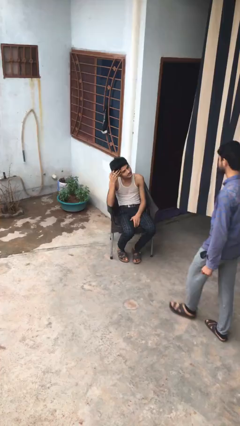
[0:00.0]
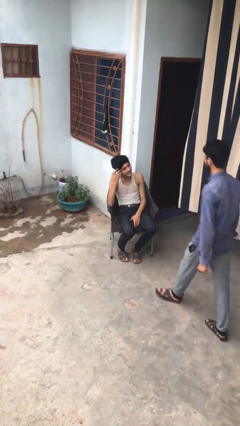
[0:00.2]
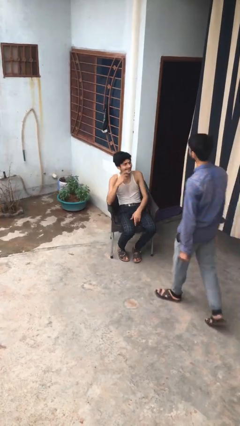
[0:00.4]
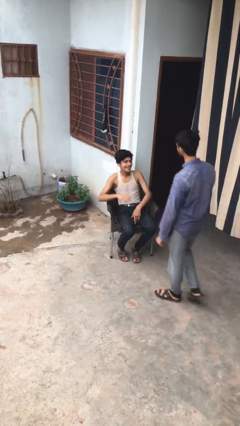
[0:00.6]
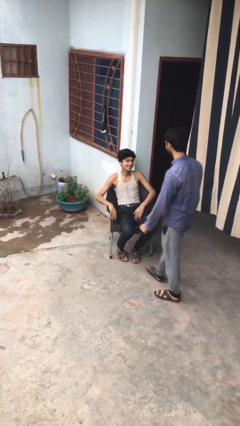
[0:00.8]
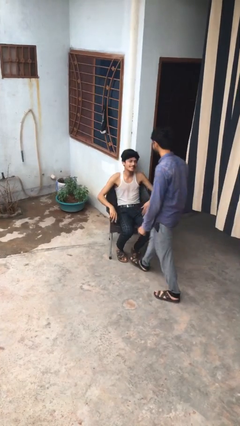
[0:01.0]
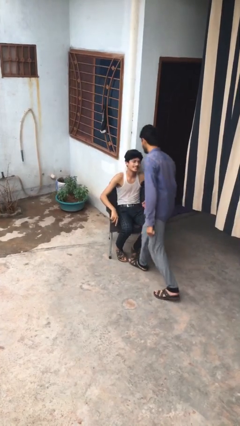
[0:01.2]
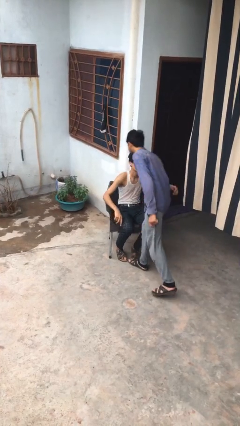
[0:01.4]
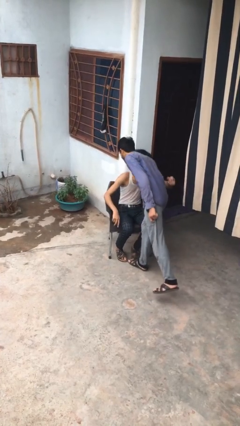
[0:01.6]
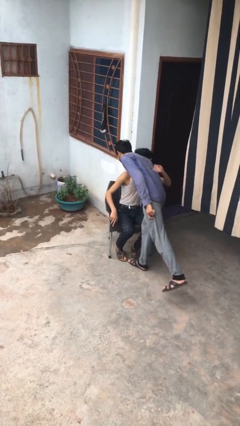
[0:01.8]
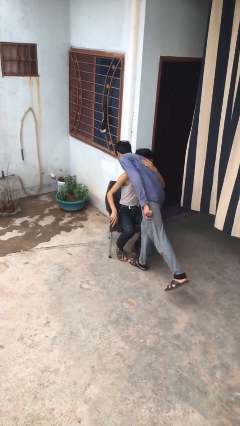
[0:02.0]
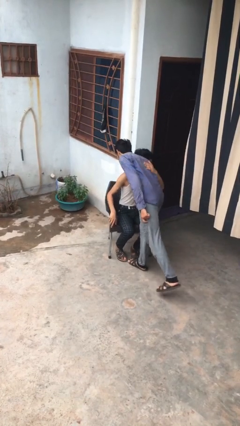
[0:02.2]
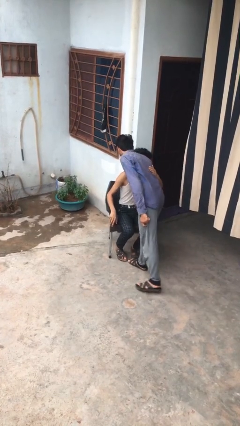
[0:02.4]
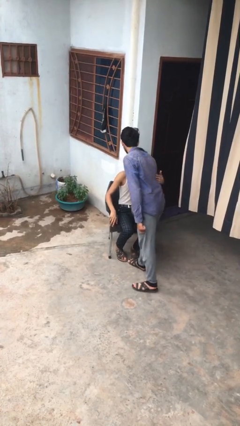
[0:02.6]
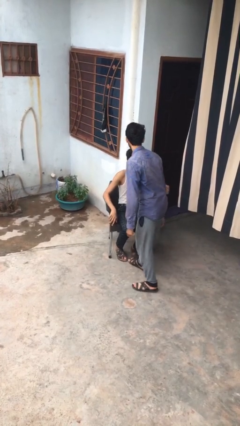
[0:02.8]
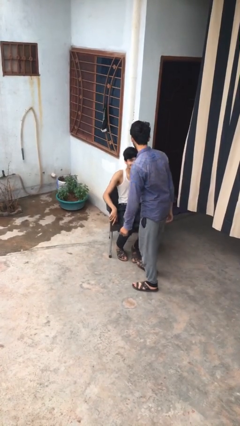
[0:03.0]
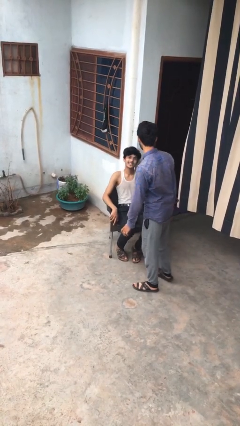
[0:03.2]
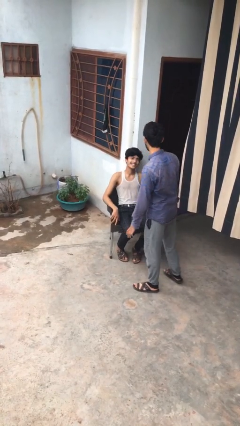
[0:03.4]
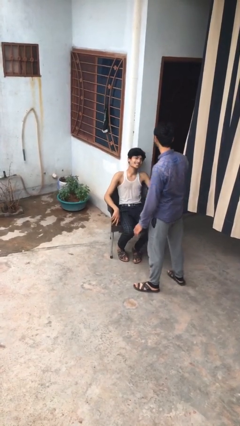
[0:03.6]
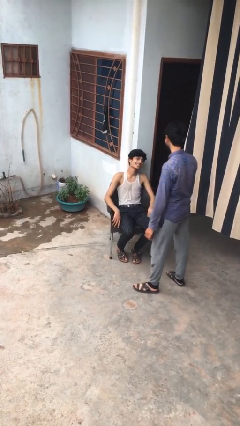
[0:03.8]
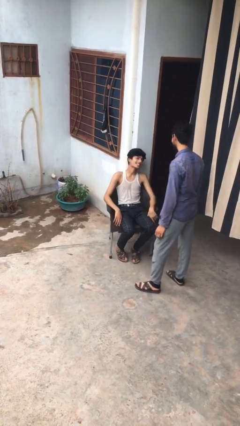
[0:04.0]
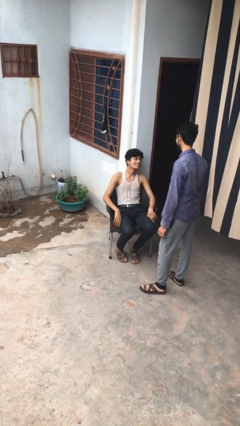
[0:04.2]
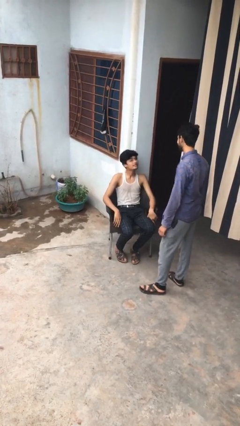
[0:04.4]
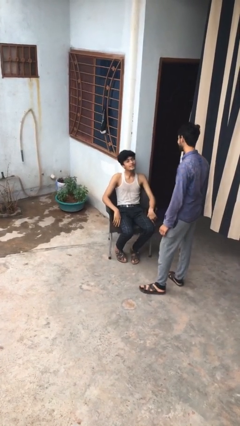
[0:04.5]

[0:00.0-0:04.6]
person embraces person

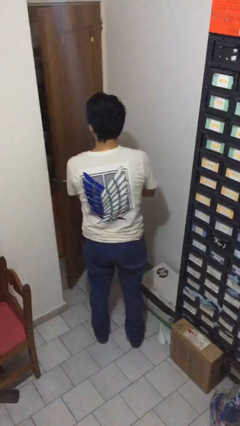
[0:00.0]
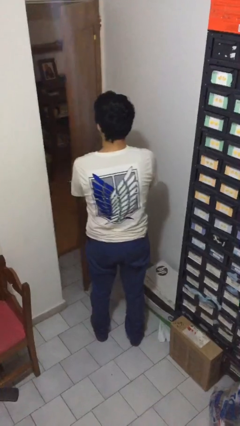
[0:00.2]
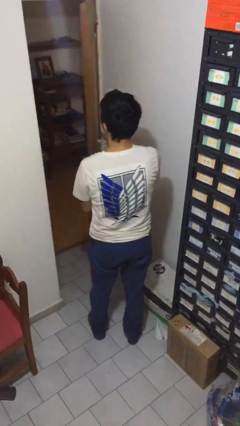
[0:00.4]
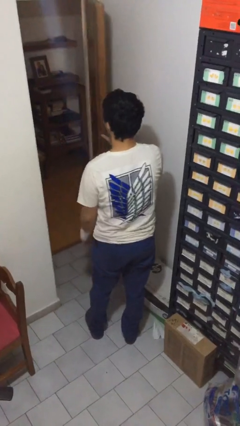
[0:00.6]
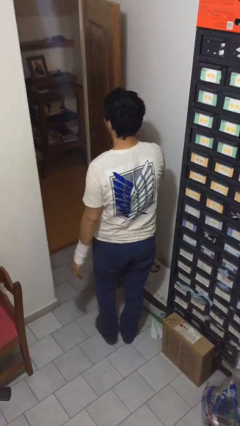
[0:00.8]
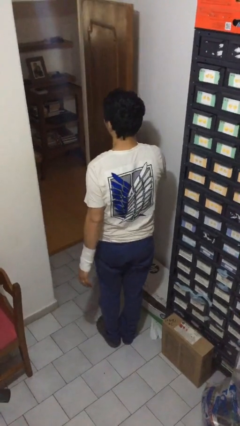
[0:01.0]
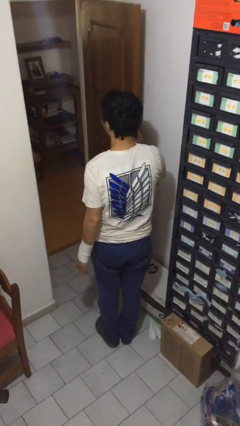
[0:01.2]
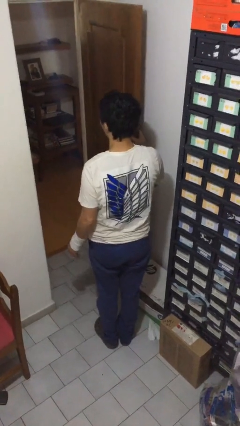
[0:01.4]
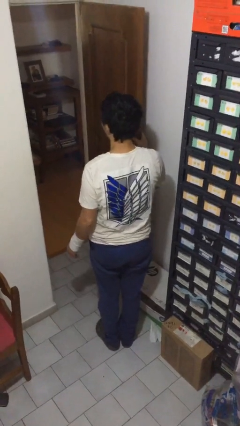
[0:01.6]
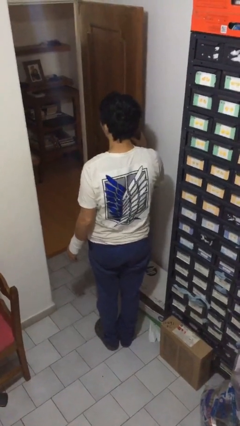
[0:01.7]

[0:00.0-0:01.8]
person opens facility door

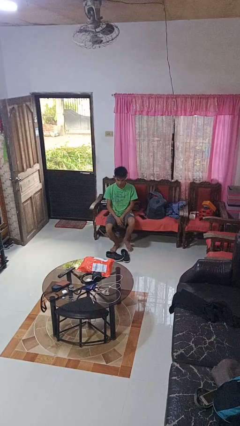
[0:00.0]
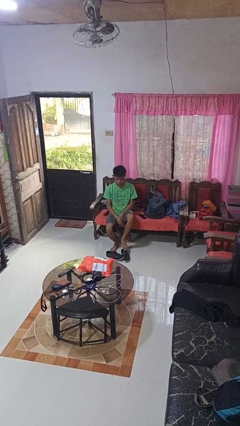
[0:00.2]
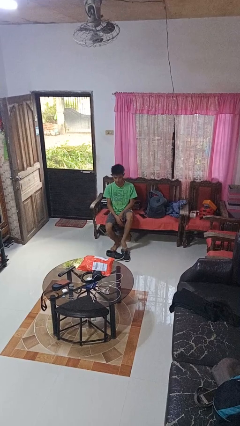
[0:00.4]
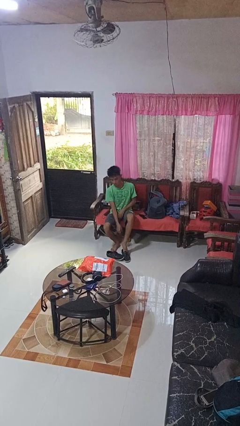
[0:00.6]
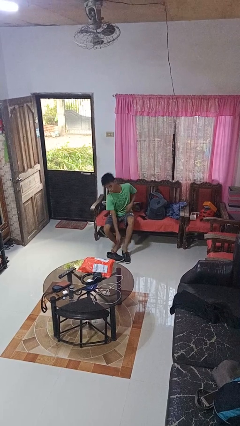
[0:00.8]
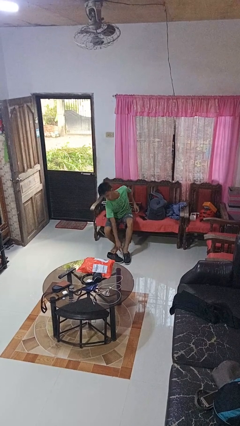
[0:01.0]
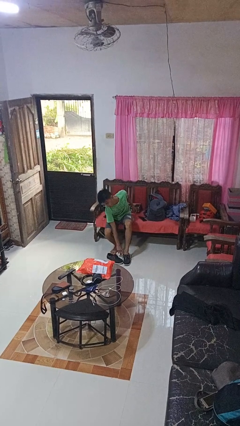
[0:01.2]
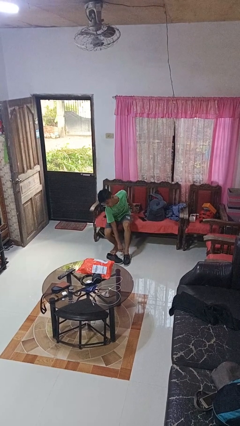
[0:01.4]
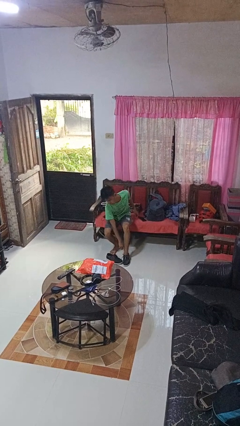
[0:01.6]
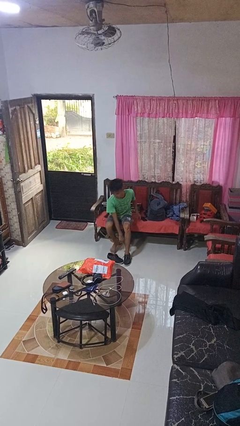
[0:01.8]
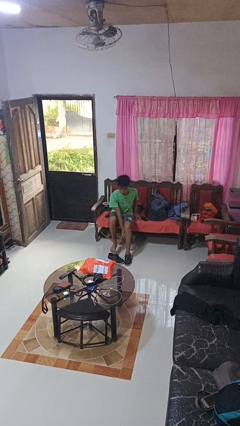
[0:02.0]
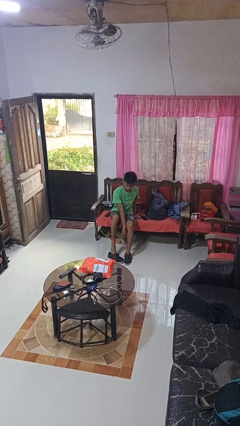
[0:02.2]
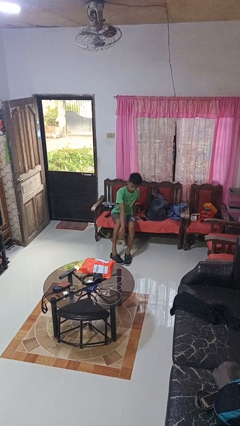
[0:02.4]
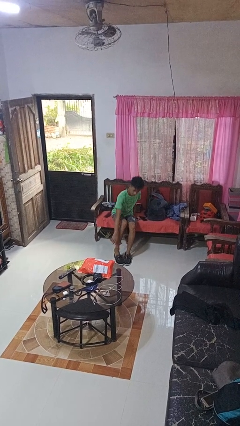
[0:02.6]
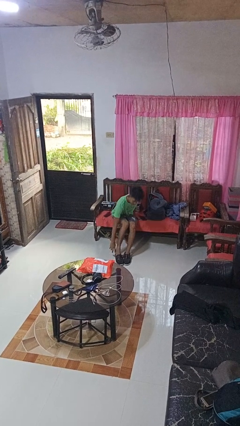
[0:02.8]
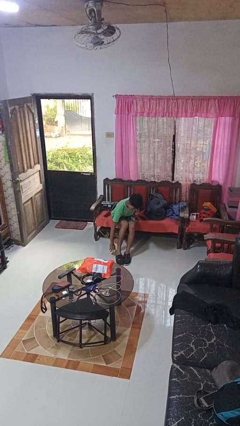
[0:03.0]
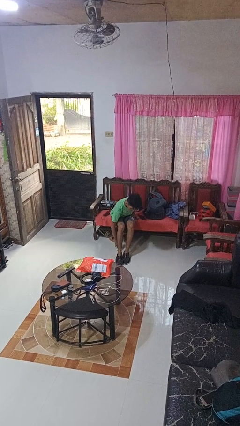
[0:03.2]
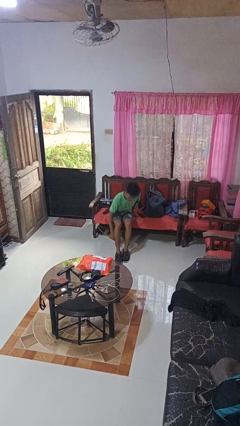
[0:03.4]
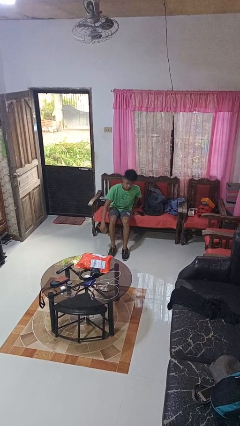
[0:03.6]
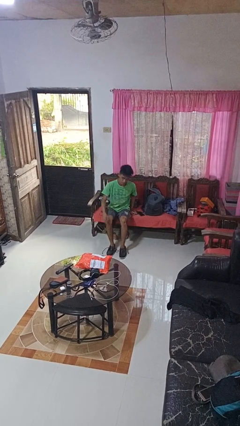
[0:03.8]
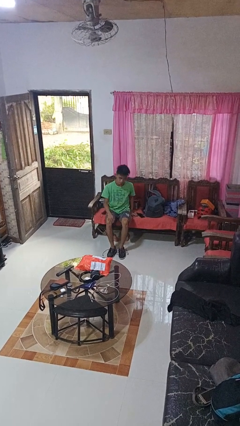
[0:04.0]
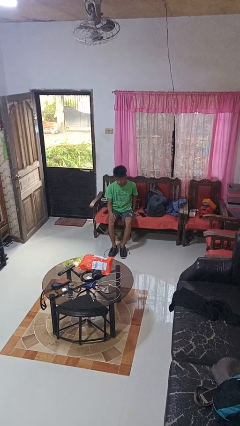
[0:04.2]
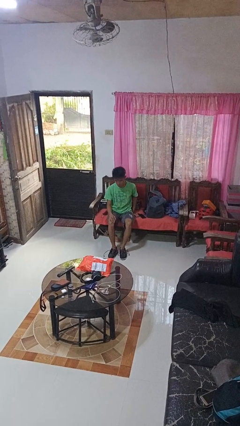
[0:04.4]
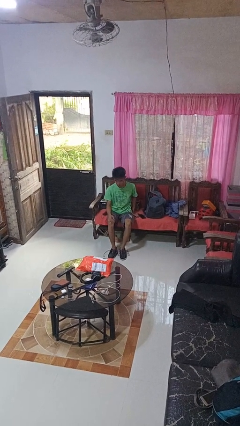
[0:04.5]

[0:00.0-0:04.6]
person puts on shoes

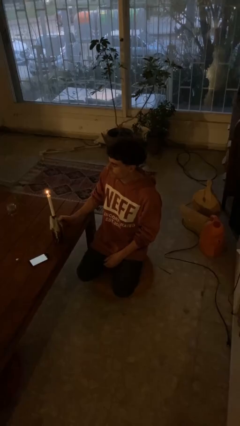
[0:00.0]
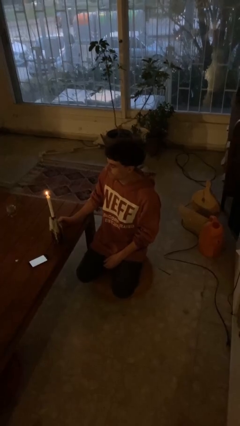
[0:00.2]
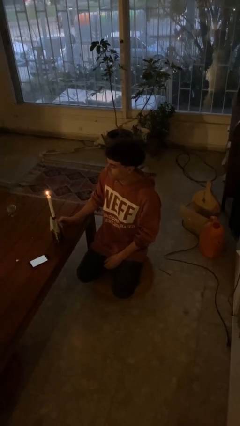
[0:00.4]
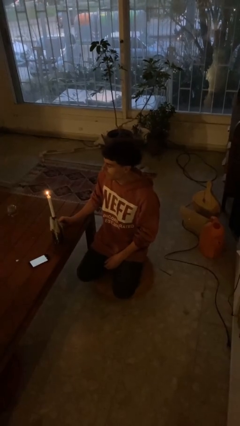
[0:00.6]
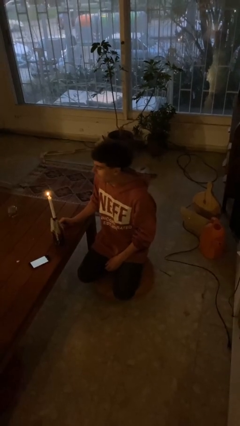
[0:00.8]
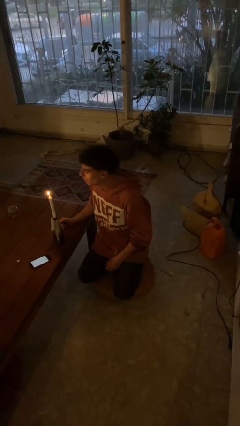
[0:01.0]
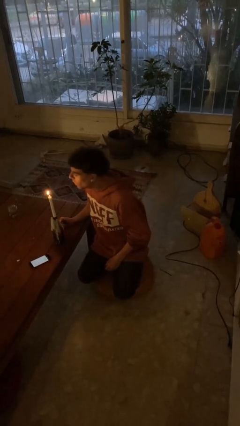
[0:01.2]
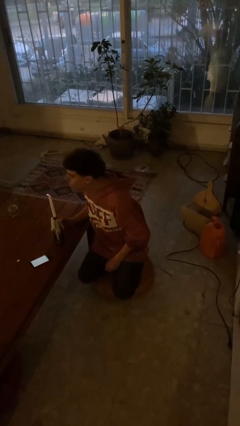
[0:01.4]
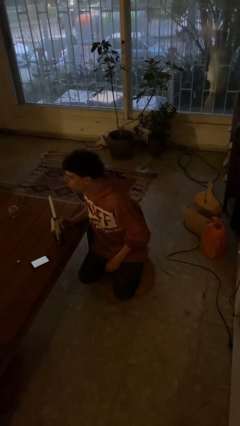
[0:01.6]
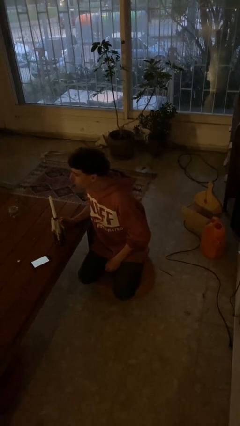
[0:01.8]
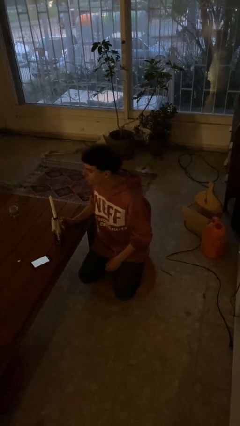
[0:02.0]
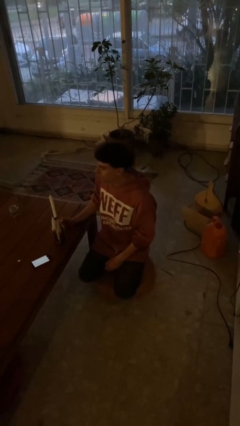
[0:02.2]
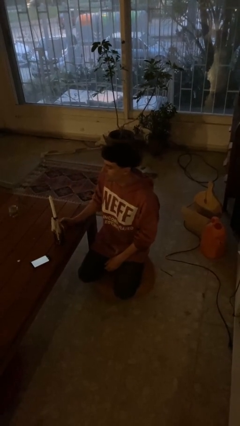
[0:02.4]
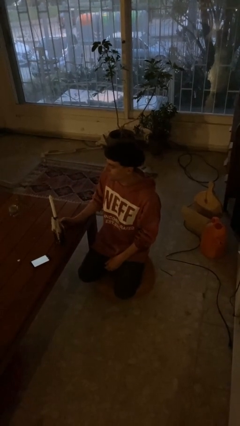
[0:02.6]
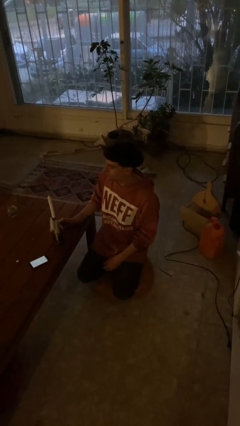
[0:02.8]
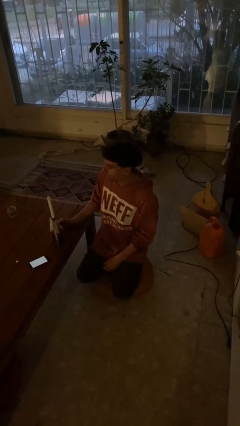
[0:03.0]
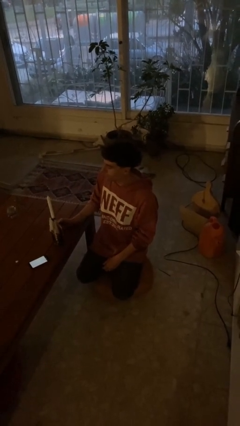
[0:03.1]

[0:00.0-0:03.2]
person extinguishes candle

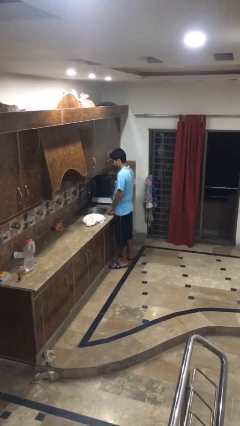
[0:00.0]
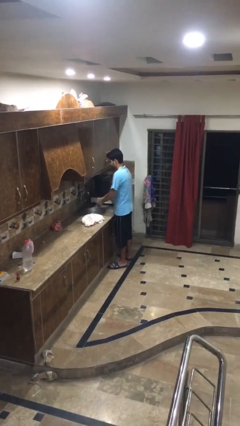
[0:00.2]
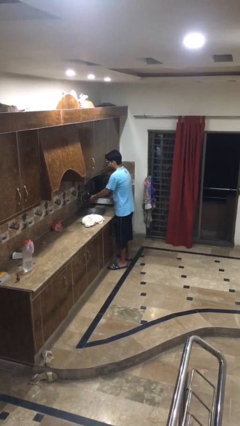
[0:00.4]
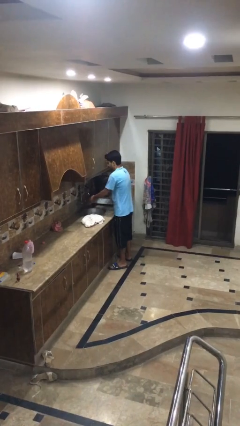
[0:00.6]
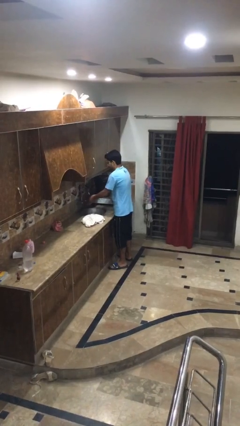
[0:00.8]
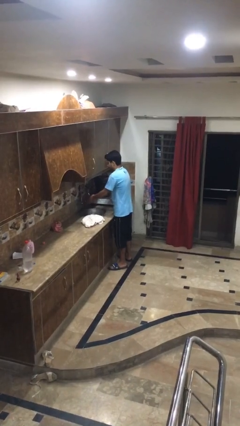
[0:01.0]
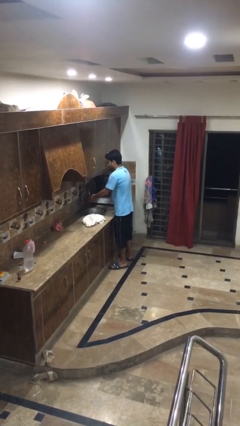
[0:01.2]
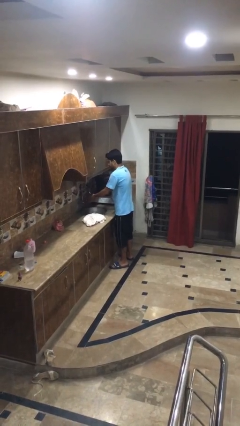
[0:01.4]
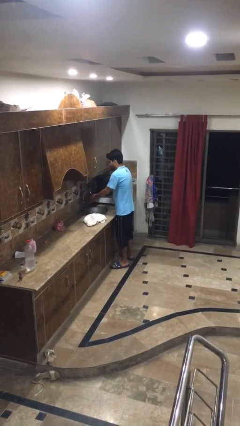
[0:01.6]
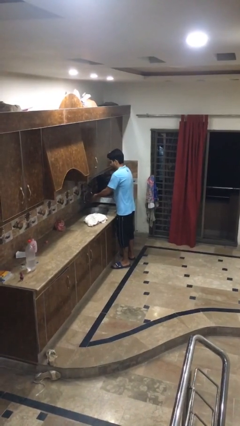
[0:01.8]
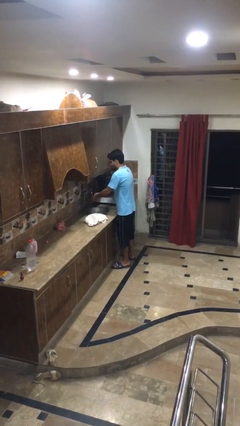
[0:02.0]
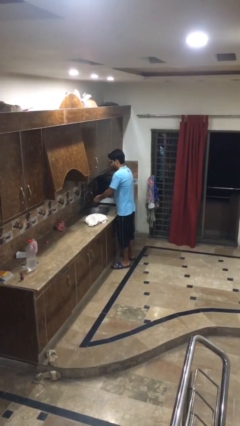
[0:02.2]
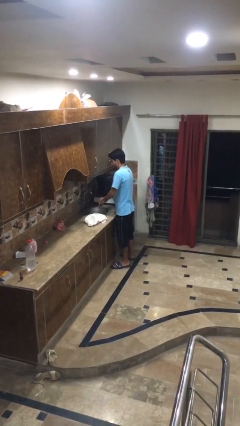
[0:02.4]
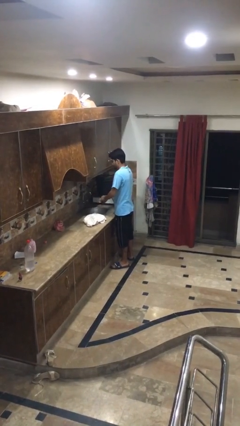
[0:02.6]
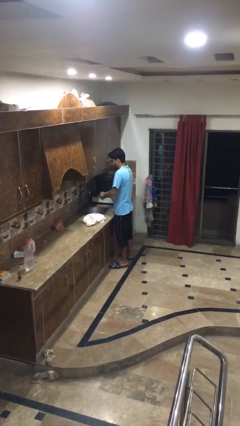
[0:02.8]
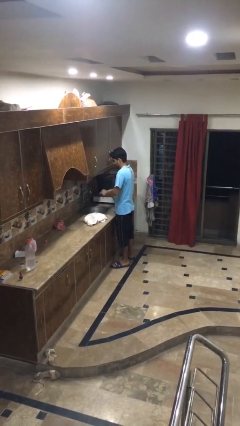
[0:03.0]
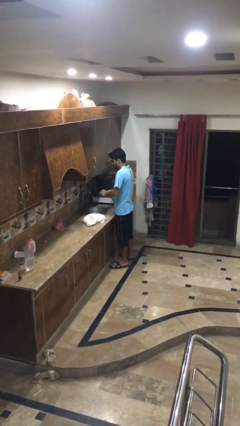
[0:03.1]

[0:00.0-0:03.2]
person washes hands
